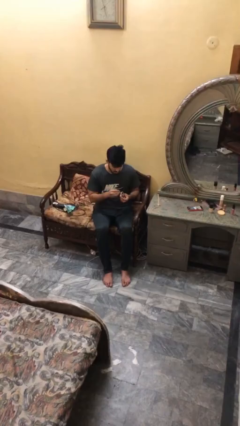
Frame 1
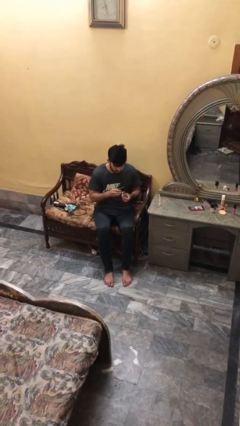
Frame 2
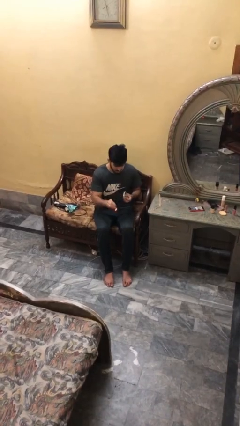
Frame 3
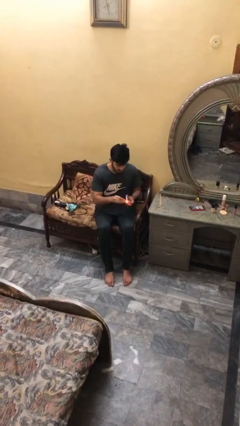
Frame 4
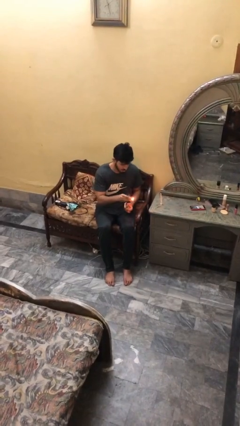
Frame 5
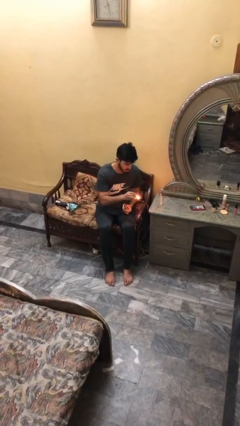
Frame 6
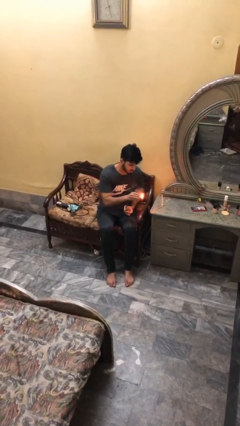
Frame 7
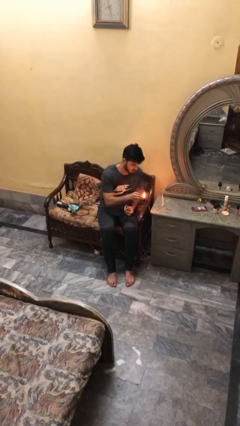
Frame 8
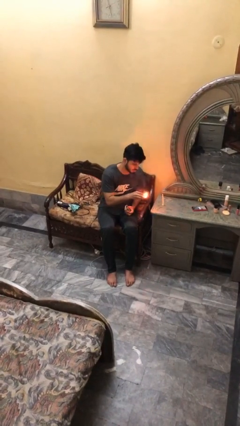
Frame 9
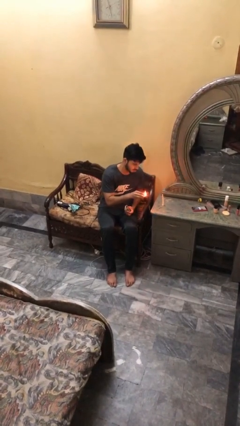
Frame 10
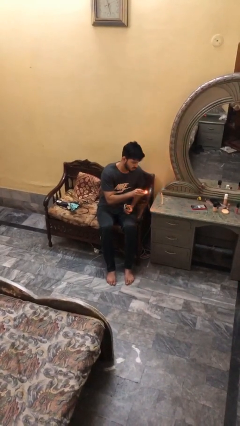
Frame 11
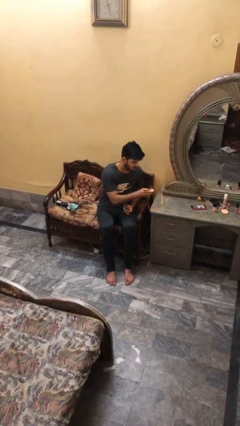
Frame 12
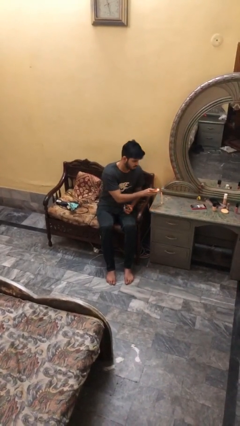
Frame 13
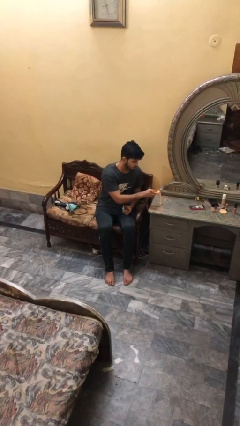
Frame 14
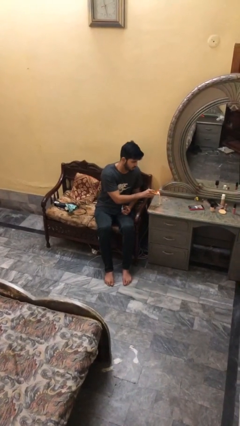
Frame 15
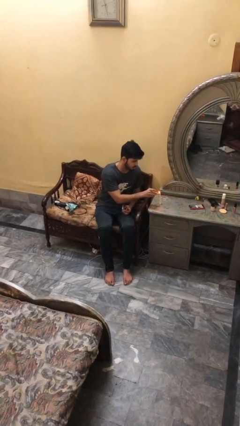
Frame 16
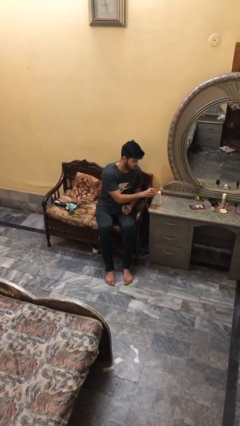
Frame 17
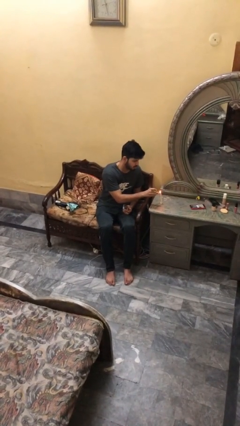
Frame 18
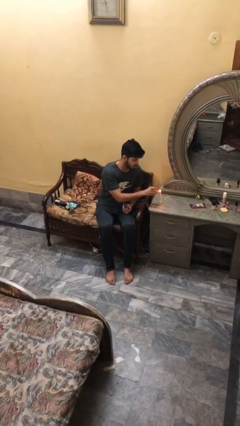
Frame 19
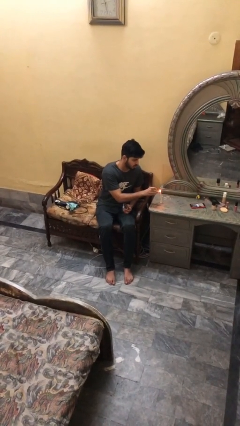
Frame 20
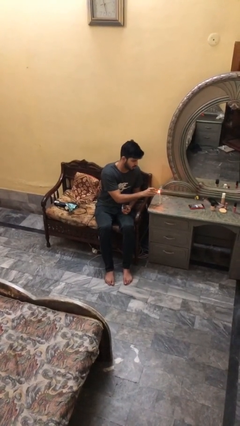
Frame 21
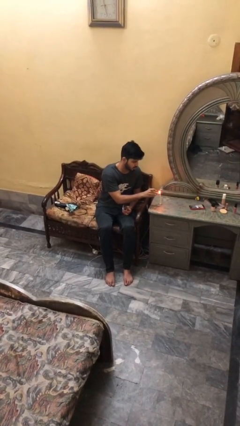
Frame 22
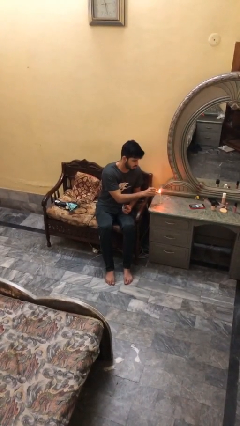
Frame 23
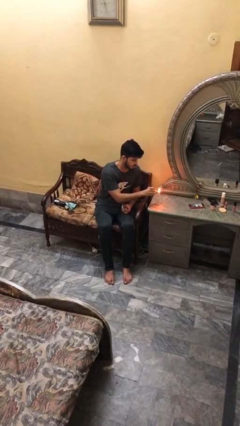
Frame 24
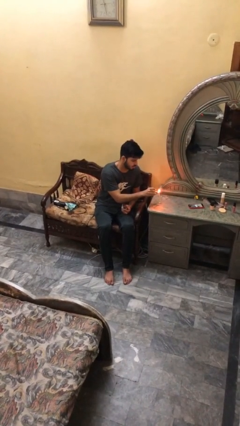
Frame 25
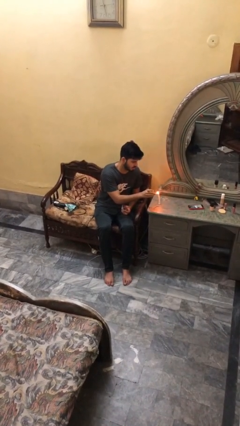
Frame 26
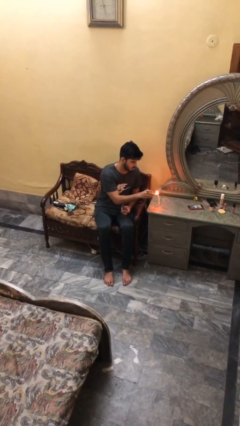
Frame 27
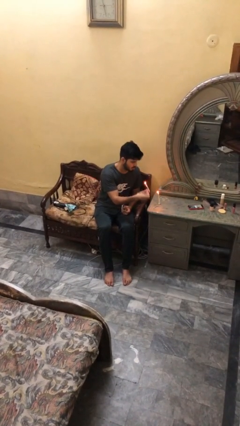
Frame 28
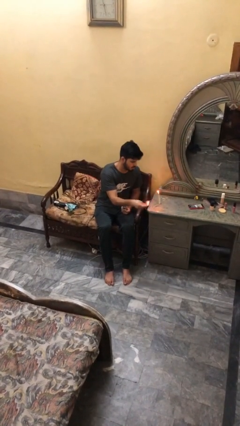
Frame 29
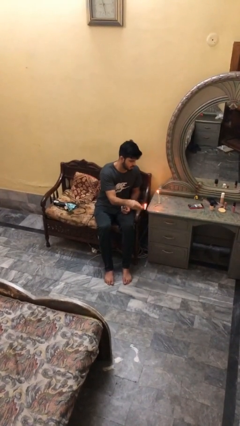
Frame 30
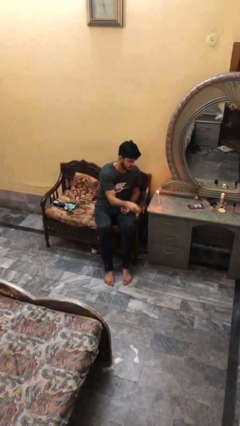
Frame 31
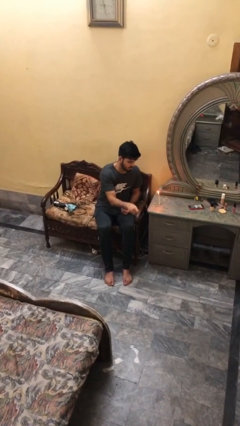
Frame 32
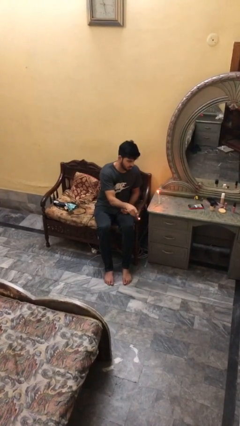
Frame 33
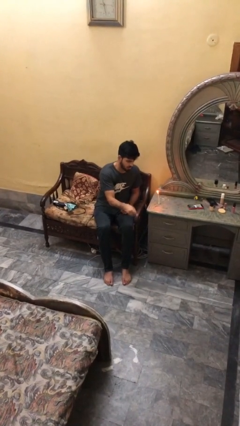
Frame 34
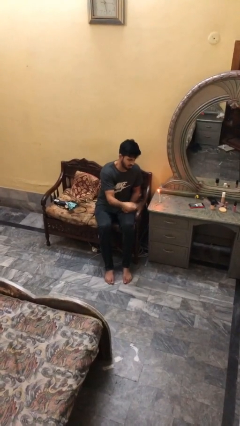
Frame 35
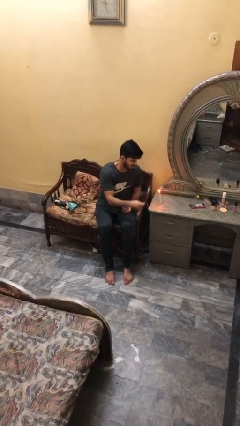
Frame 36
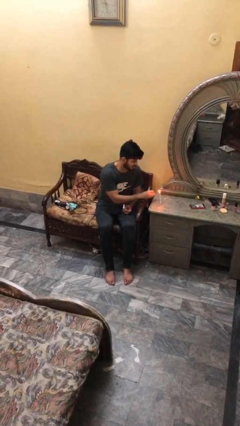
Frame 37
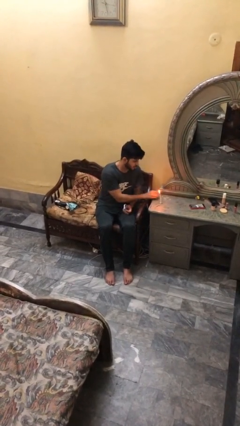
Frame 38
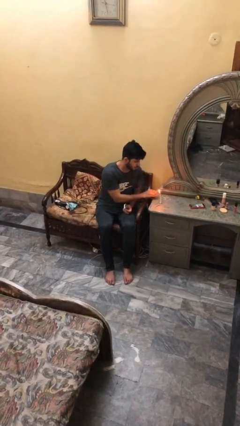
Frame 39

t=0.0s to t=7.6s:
person lights candle

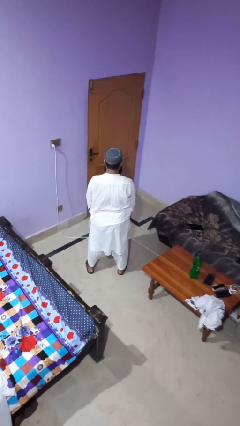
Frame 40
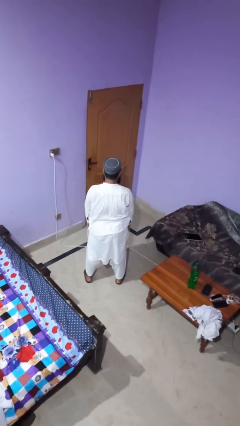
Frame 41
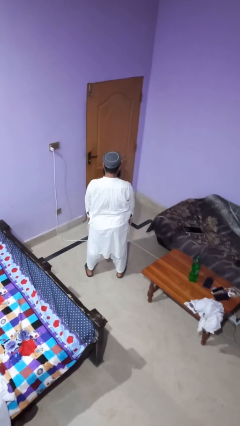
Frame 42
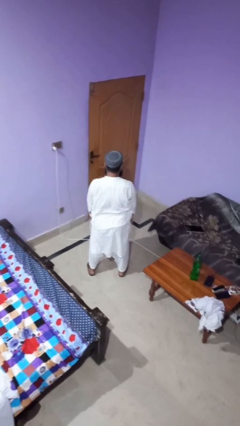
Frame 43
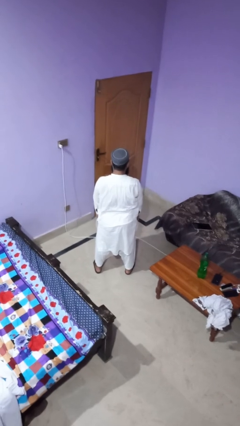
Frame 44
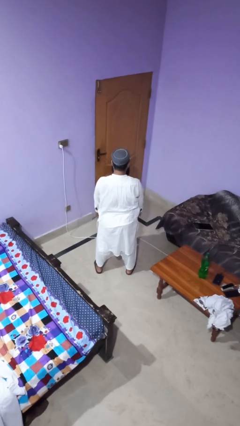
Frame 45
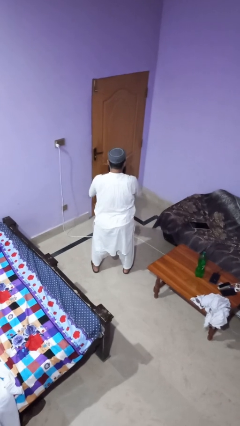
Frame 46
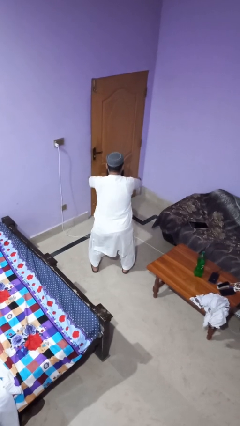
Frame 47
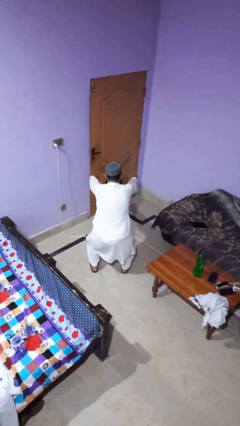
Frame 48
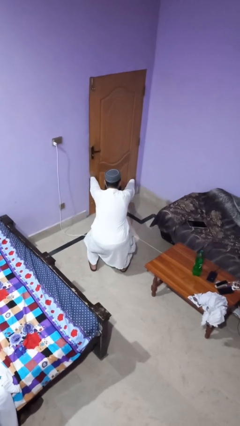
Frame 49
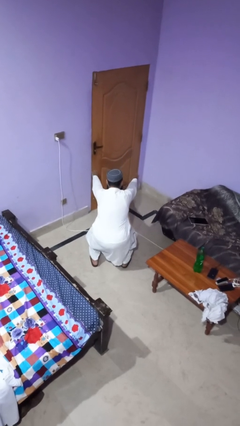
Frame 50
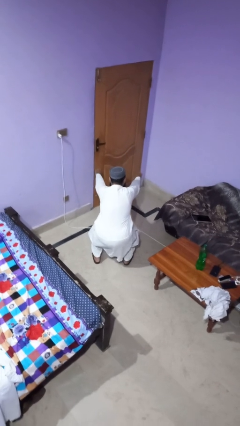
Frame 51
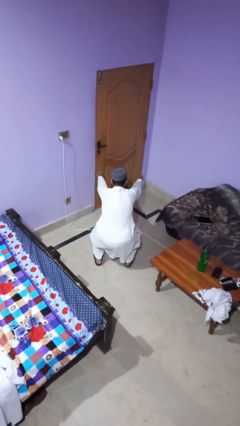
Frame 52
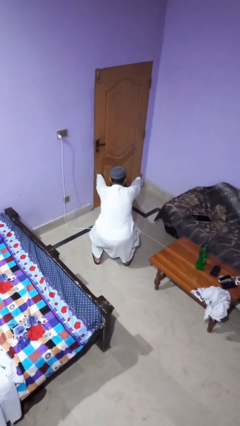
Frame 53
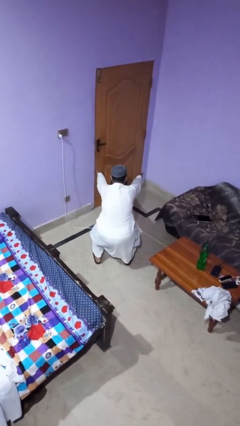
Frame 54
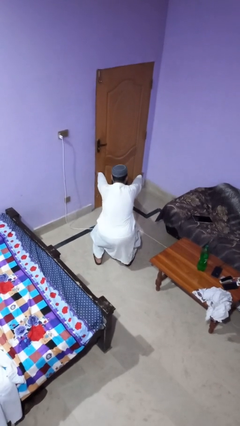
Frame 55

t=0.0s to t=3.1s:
person squats

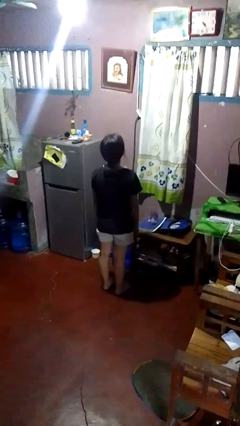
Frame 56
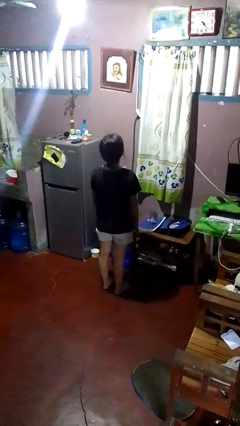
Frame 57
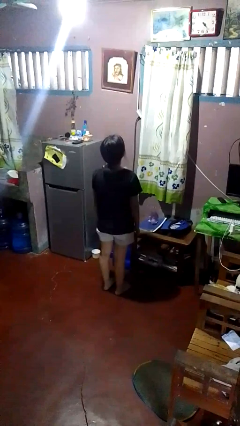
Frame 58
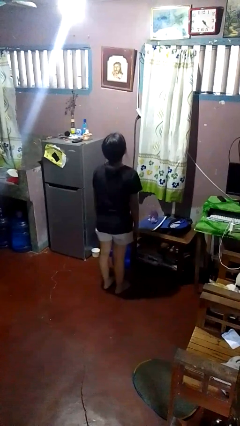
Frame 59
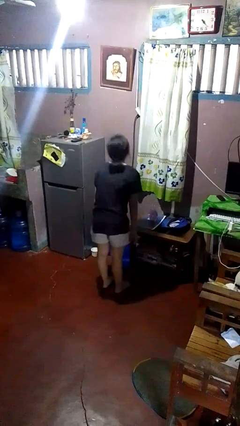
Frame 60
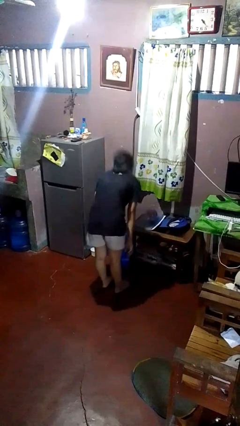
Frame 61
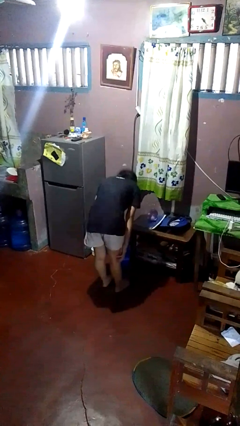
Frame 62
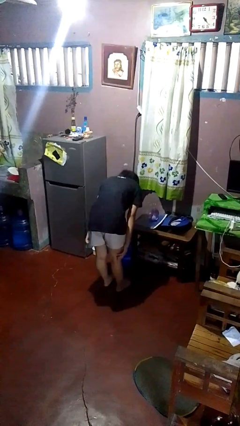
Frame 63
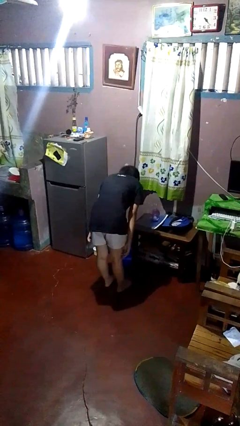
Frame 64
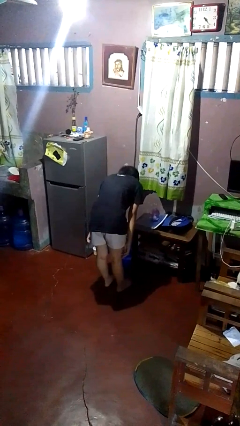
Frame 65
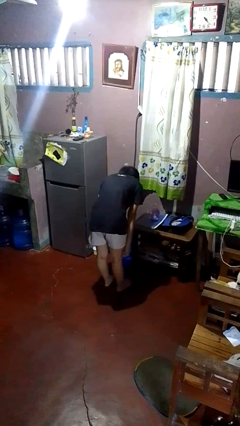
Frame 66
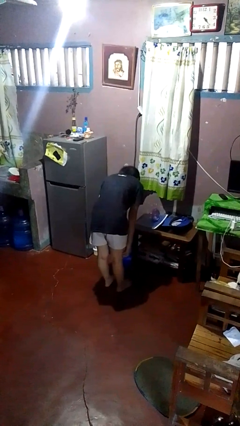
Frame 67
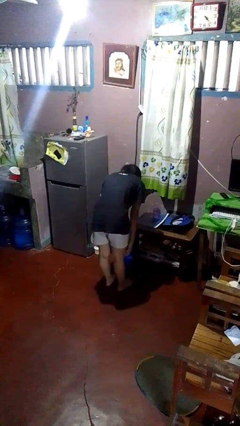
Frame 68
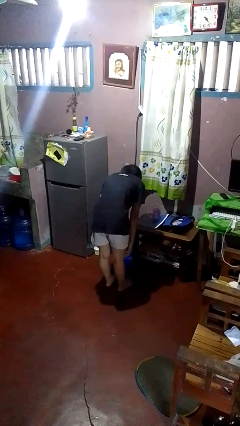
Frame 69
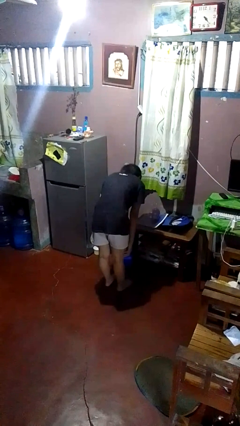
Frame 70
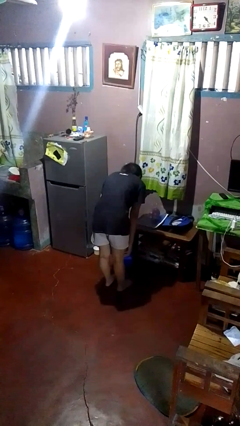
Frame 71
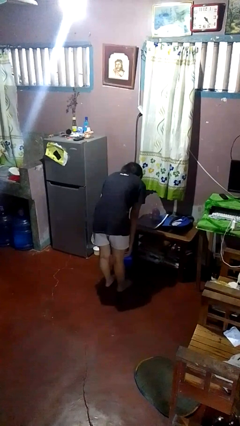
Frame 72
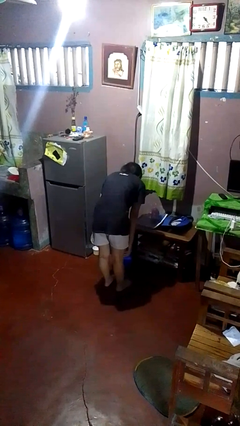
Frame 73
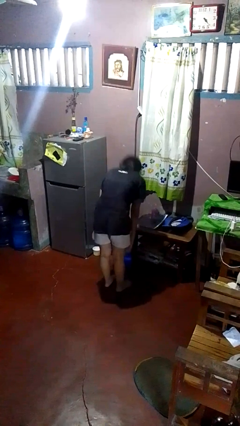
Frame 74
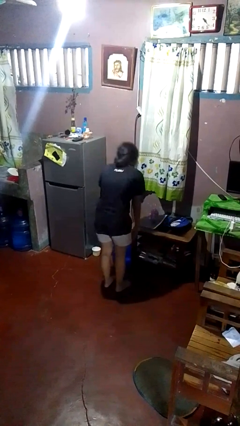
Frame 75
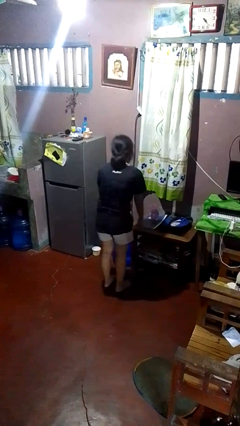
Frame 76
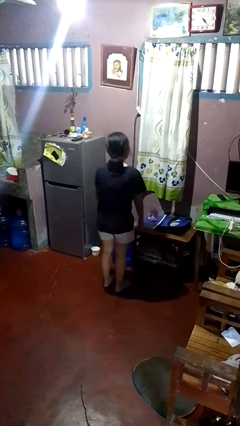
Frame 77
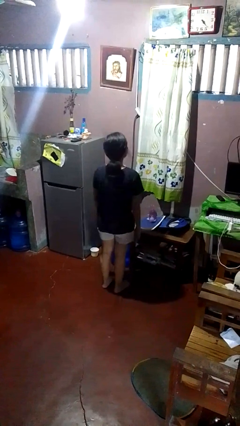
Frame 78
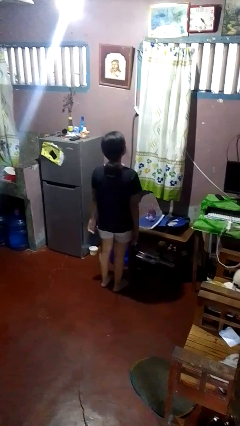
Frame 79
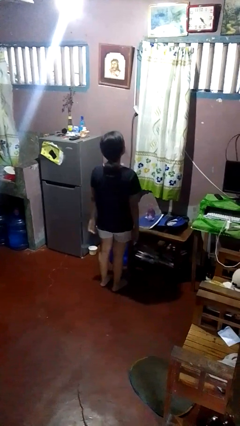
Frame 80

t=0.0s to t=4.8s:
person bows

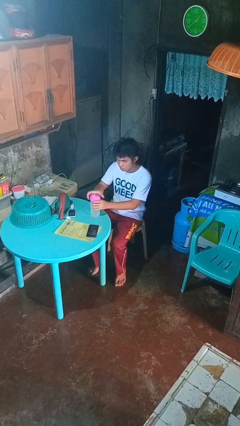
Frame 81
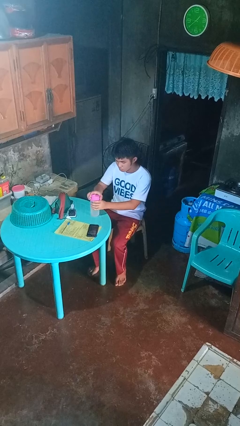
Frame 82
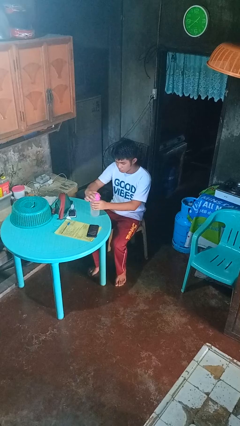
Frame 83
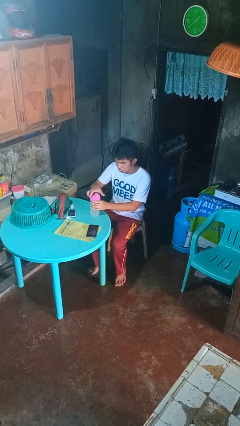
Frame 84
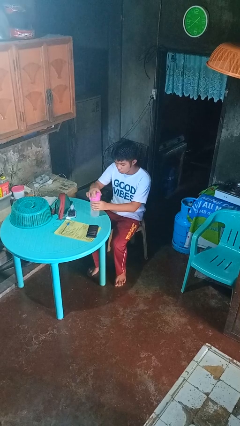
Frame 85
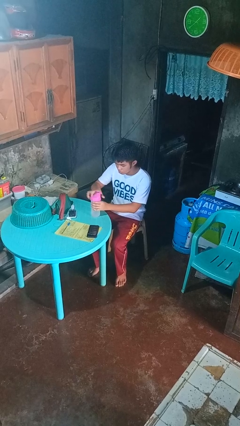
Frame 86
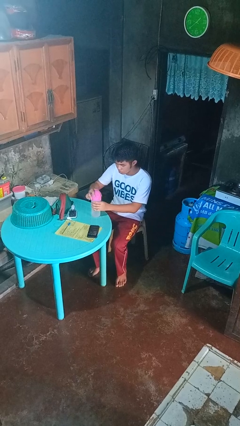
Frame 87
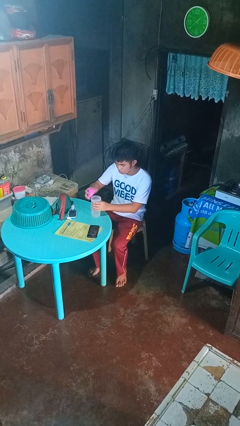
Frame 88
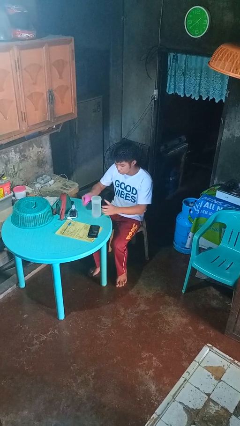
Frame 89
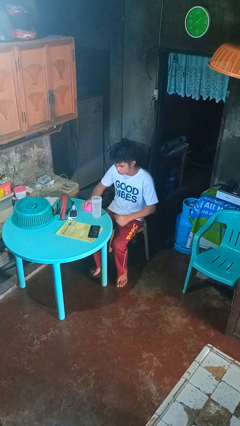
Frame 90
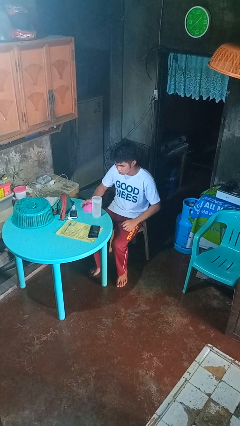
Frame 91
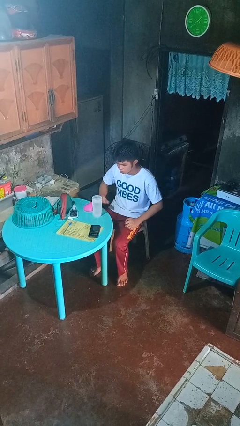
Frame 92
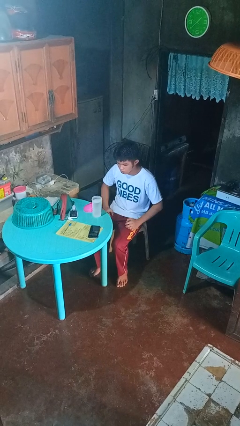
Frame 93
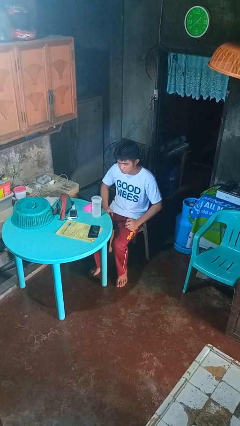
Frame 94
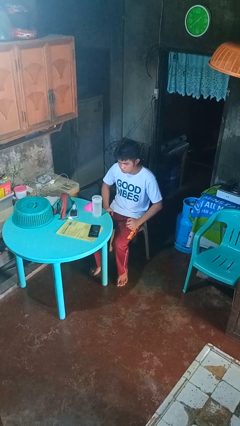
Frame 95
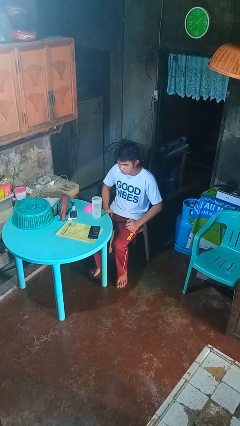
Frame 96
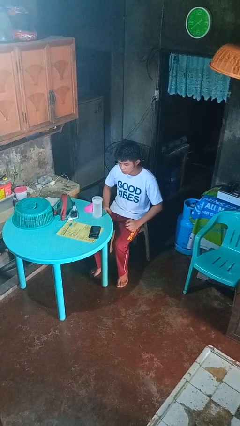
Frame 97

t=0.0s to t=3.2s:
person unscrews lid from bottle
